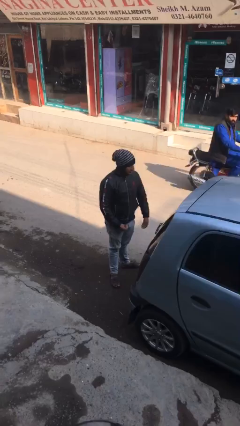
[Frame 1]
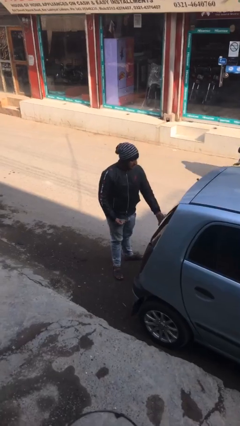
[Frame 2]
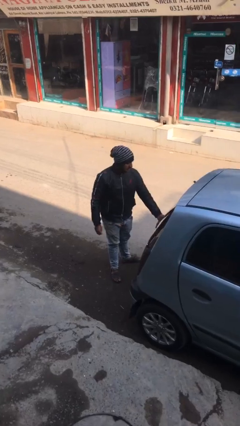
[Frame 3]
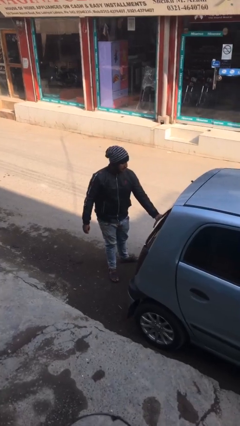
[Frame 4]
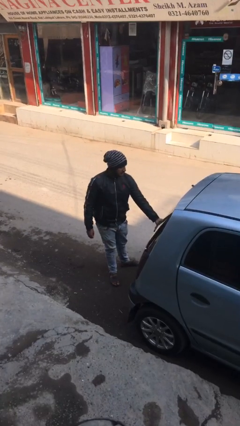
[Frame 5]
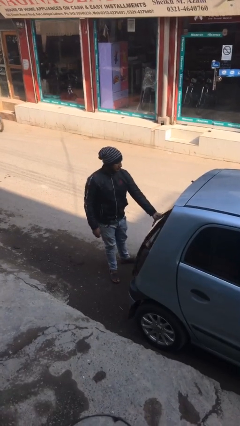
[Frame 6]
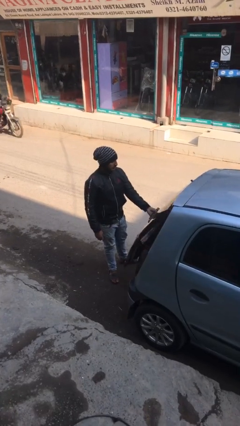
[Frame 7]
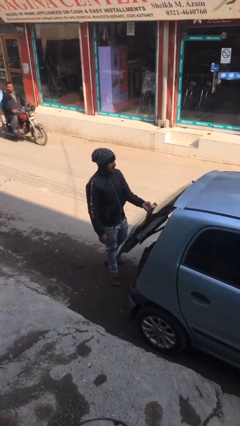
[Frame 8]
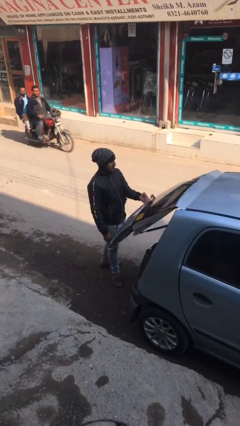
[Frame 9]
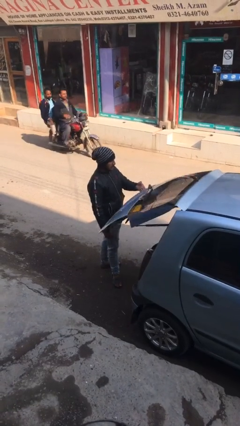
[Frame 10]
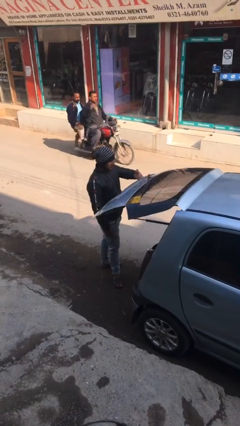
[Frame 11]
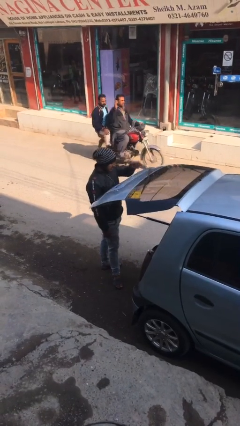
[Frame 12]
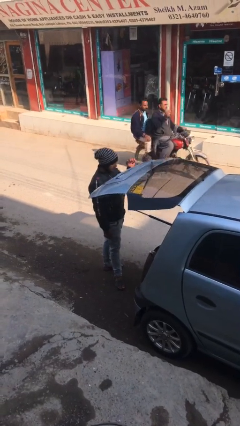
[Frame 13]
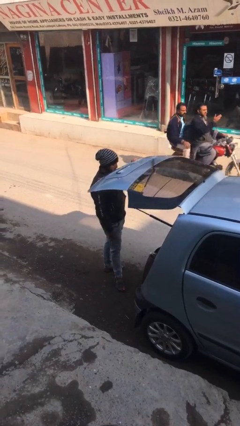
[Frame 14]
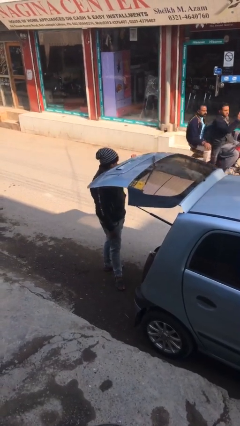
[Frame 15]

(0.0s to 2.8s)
person opens car trunk

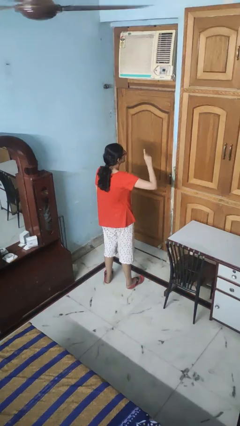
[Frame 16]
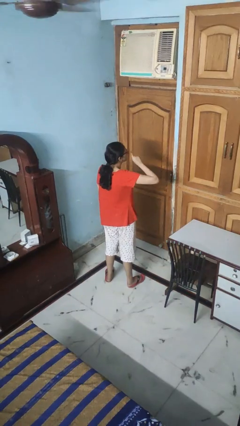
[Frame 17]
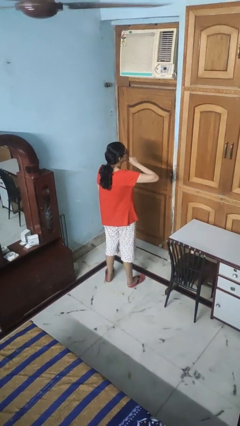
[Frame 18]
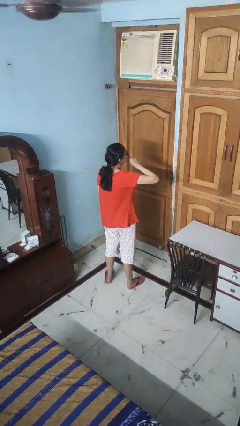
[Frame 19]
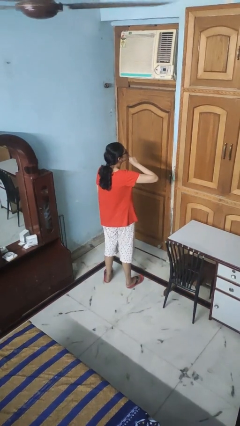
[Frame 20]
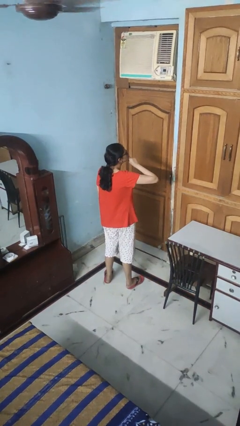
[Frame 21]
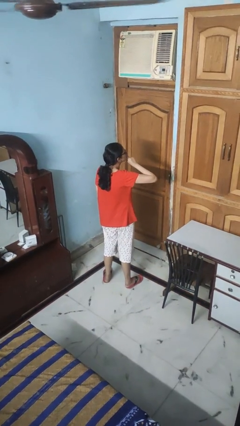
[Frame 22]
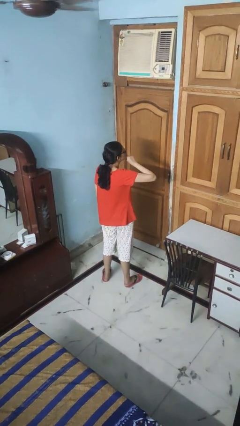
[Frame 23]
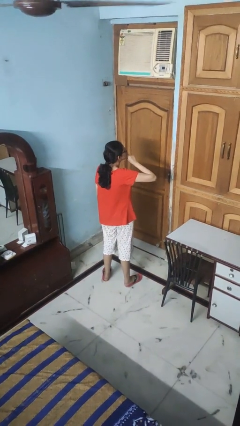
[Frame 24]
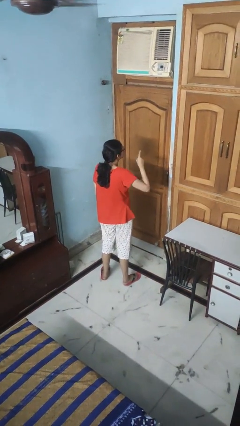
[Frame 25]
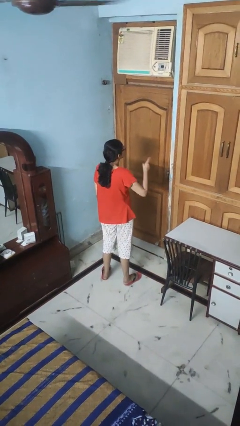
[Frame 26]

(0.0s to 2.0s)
person gestures be quiet

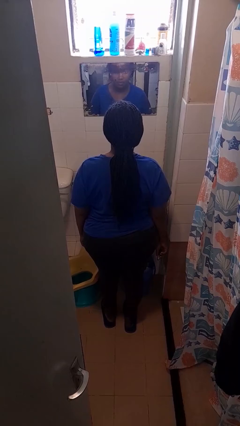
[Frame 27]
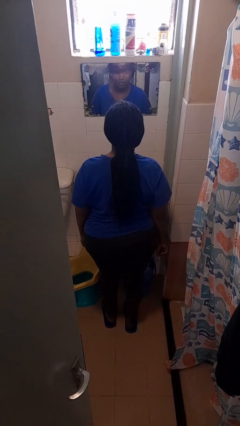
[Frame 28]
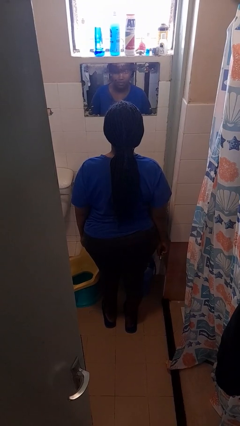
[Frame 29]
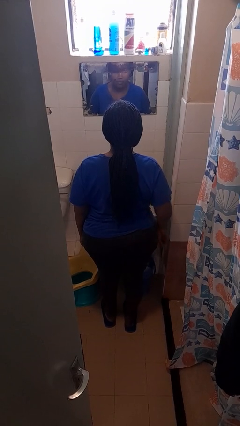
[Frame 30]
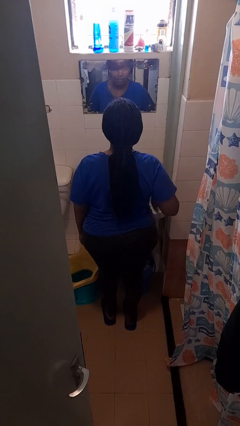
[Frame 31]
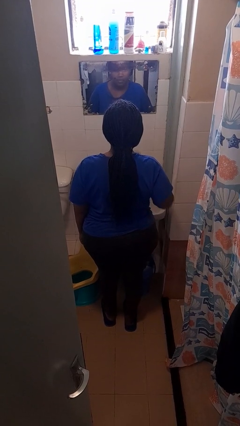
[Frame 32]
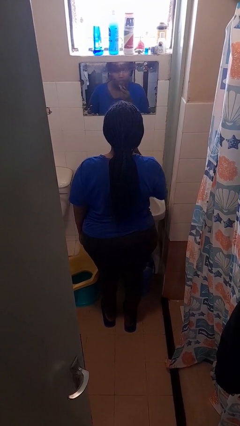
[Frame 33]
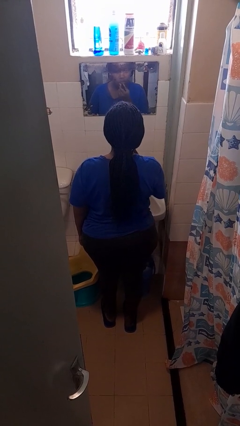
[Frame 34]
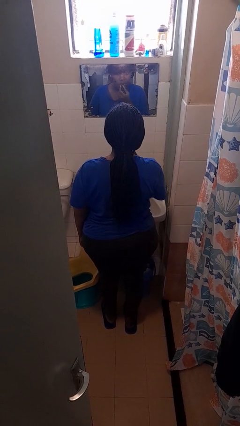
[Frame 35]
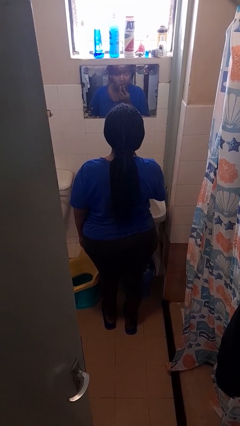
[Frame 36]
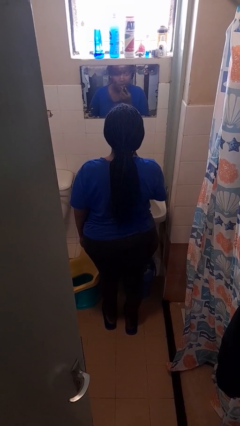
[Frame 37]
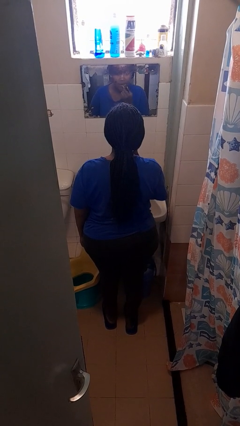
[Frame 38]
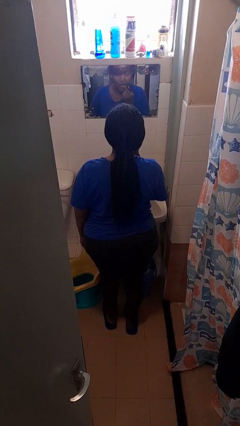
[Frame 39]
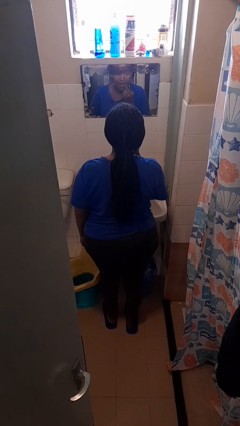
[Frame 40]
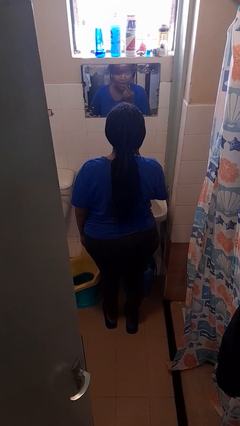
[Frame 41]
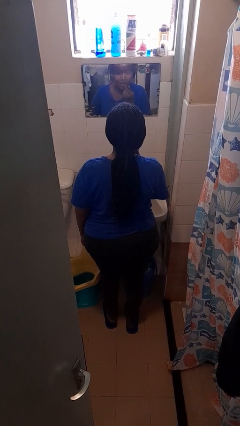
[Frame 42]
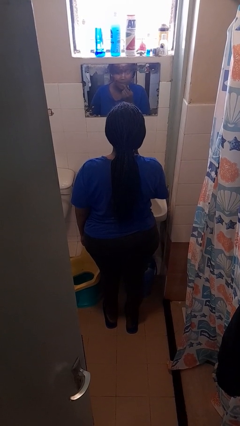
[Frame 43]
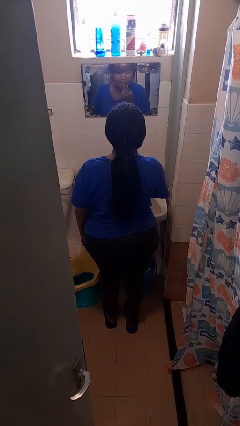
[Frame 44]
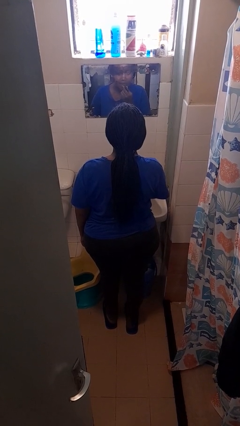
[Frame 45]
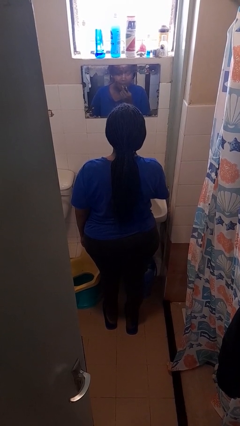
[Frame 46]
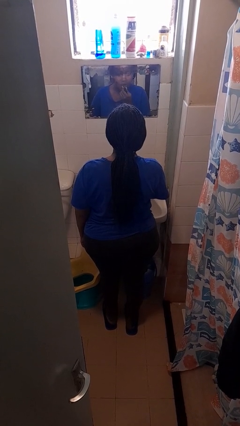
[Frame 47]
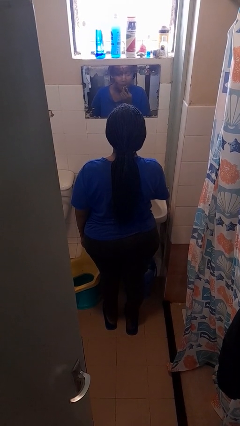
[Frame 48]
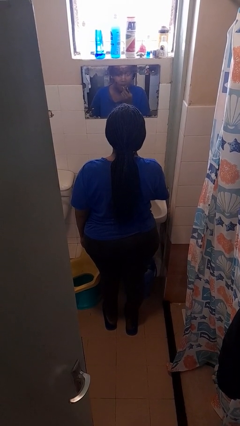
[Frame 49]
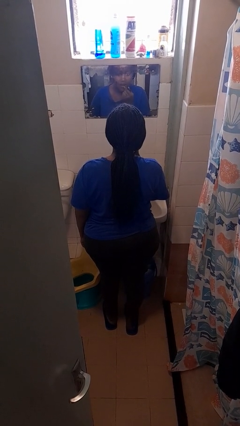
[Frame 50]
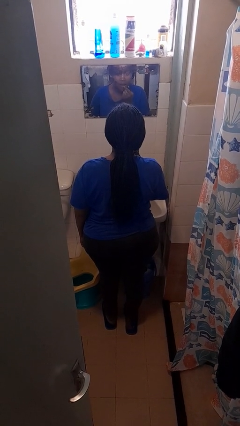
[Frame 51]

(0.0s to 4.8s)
person applies lip makeup

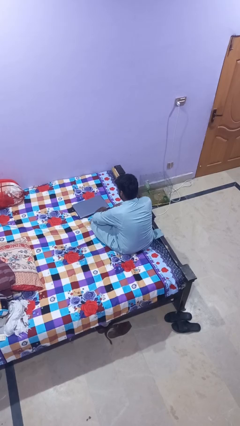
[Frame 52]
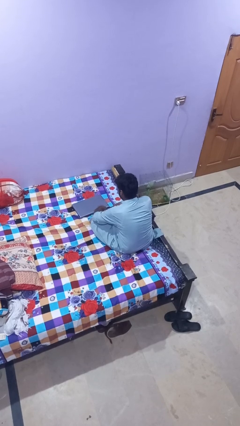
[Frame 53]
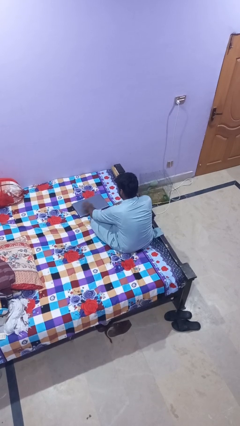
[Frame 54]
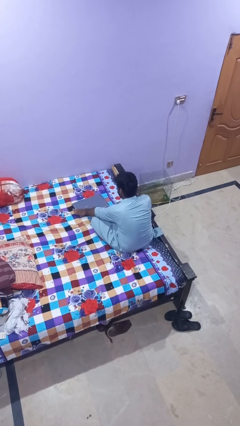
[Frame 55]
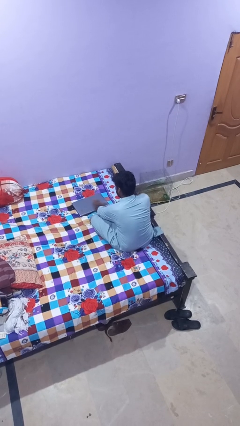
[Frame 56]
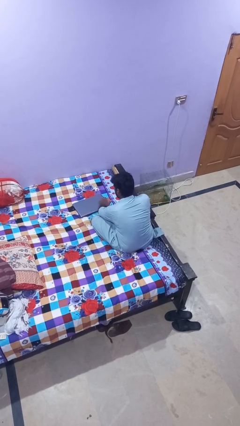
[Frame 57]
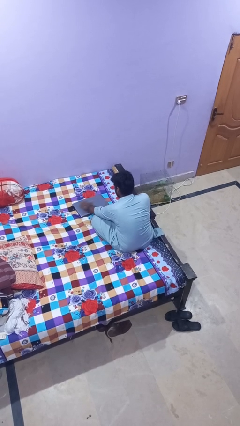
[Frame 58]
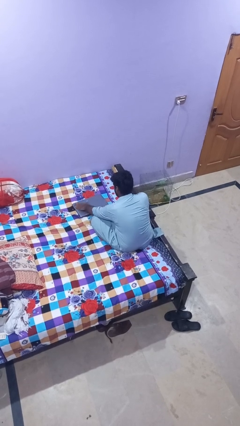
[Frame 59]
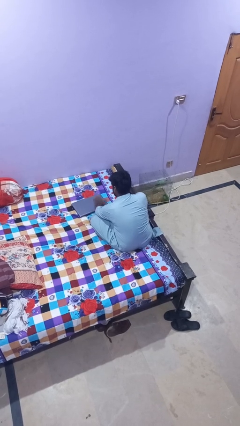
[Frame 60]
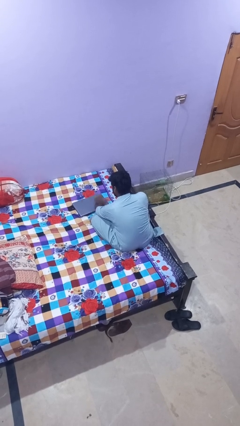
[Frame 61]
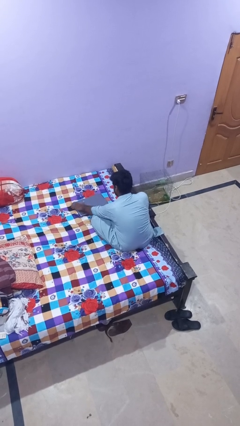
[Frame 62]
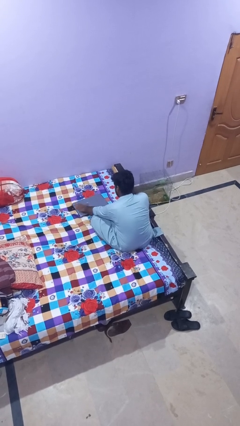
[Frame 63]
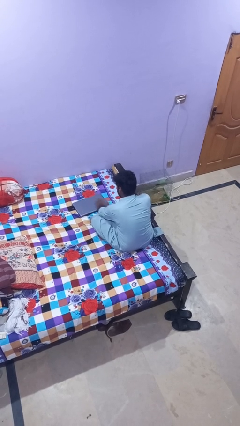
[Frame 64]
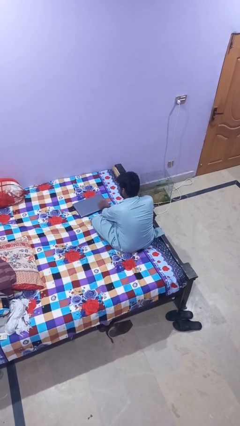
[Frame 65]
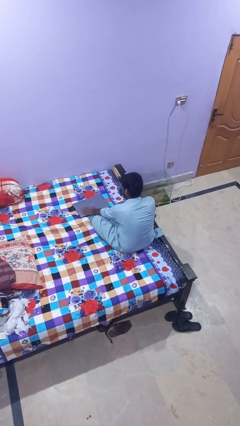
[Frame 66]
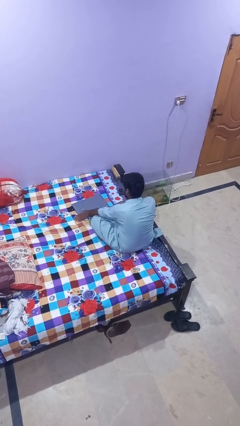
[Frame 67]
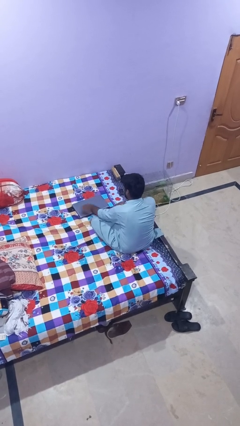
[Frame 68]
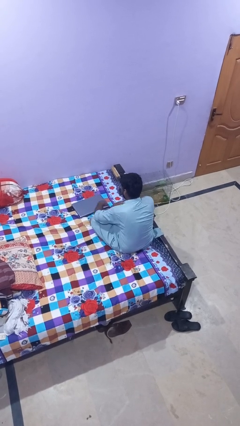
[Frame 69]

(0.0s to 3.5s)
person waves hand over object

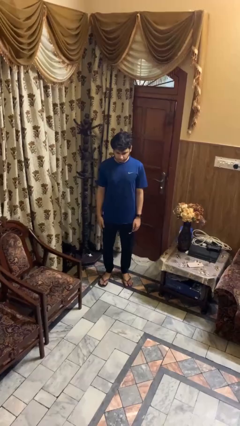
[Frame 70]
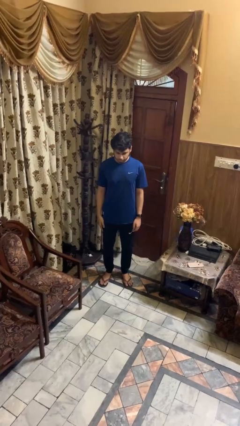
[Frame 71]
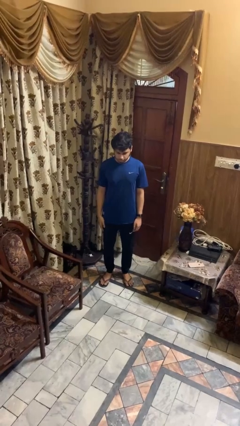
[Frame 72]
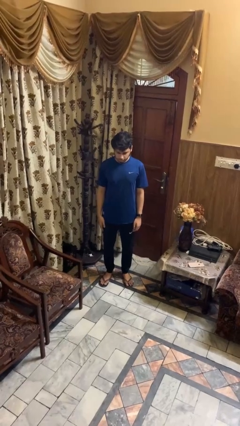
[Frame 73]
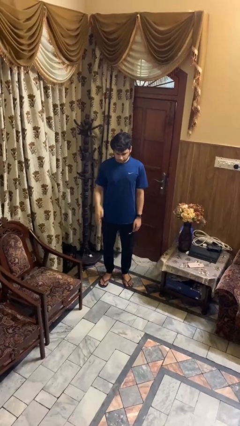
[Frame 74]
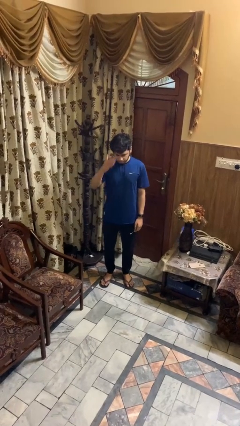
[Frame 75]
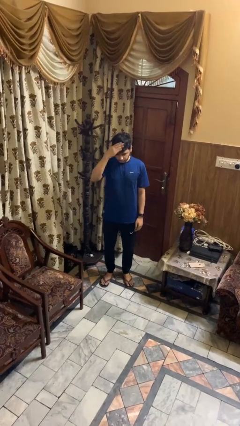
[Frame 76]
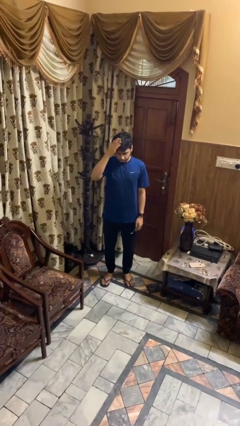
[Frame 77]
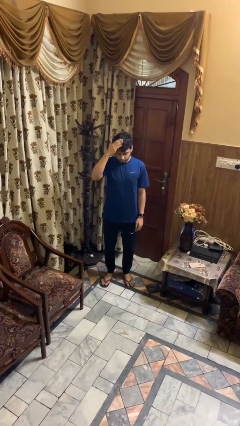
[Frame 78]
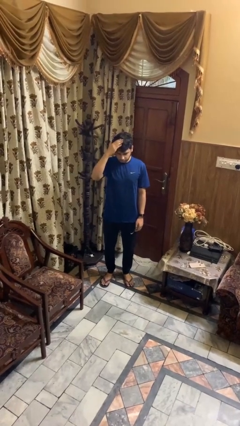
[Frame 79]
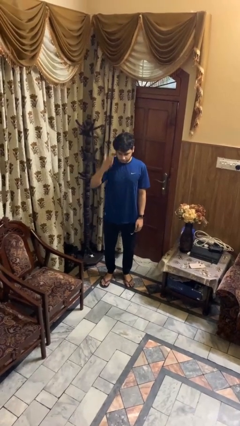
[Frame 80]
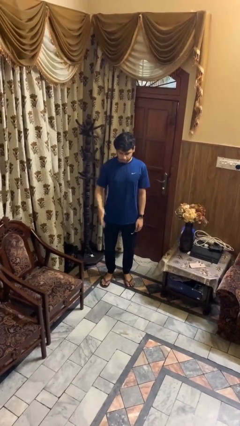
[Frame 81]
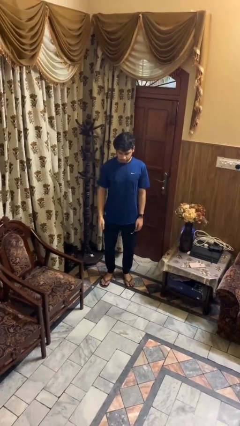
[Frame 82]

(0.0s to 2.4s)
person pats head

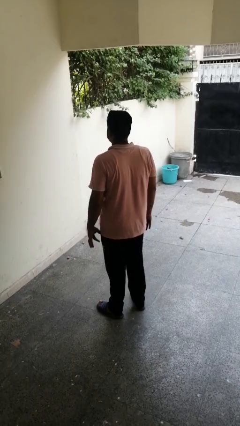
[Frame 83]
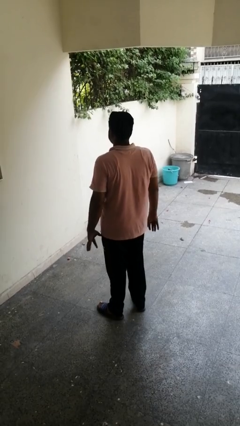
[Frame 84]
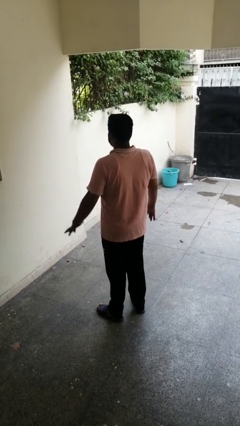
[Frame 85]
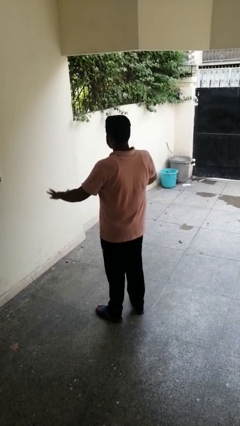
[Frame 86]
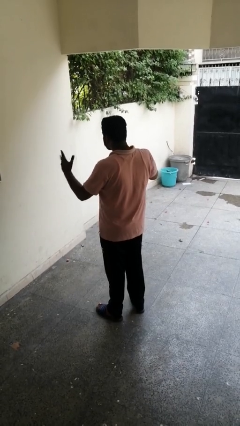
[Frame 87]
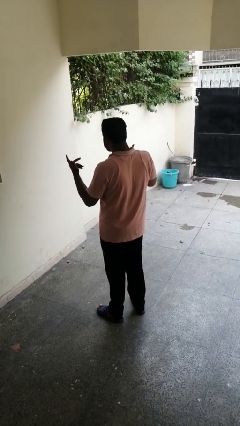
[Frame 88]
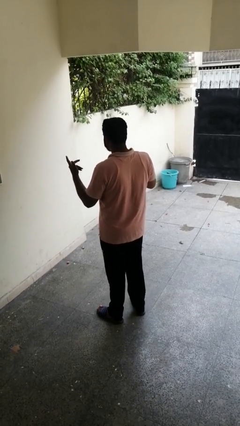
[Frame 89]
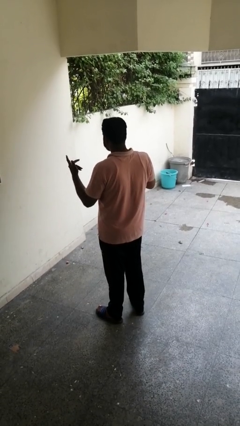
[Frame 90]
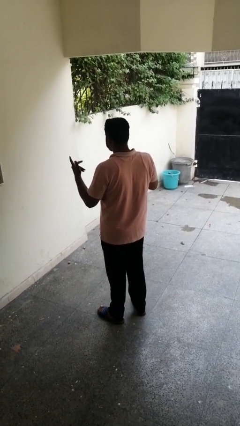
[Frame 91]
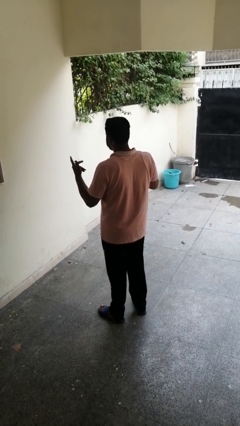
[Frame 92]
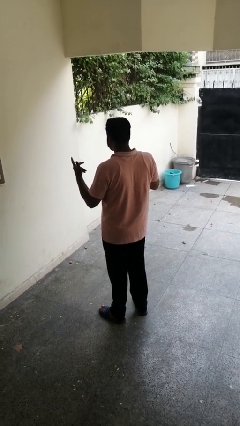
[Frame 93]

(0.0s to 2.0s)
person shrugs
